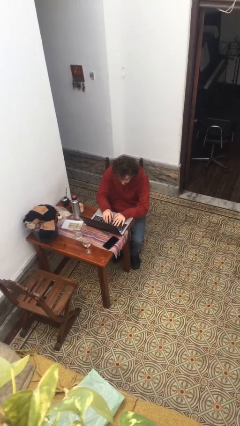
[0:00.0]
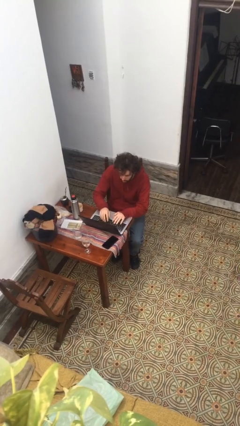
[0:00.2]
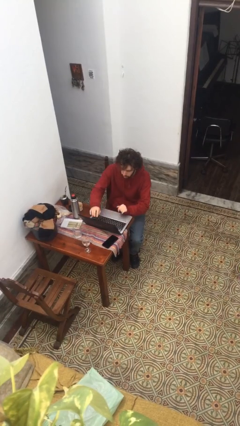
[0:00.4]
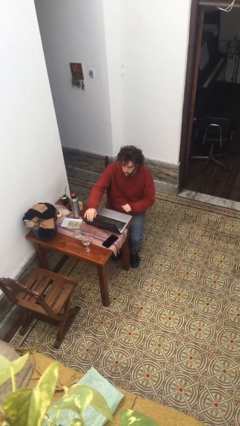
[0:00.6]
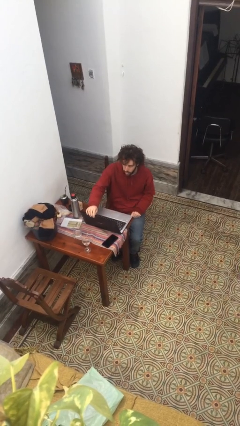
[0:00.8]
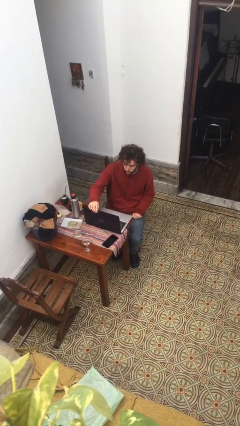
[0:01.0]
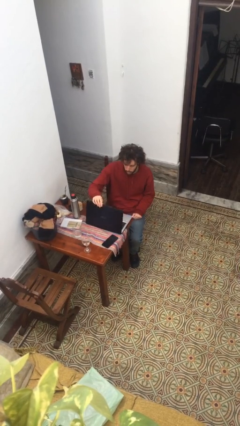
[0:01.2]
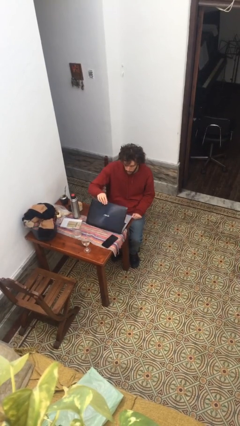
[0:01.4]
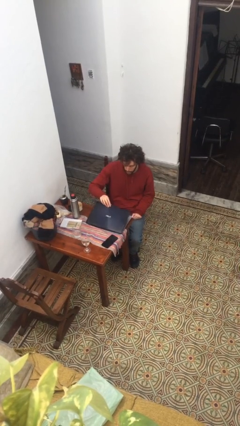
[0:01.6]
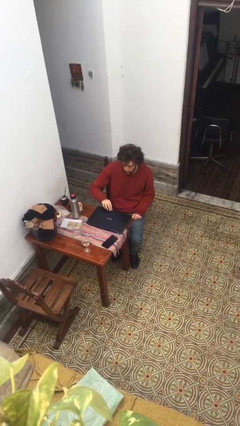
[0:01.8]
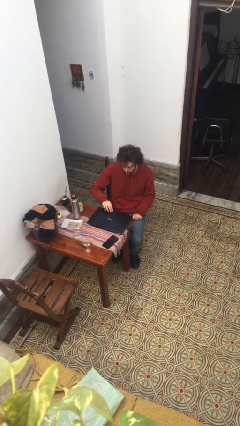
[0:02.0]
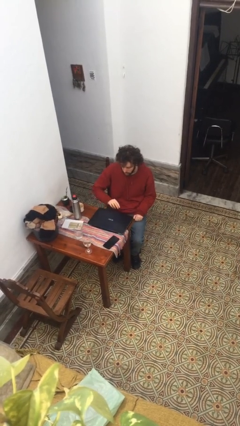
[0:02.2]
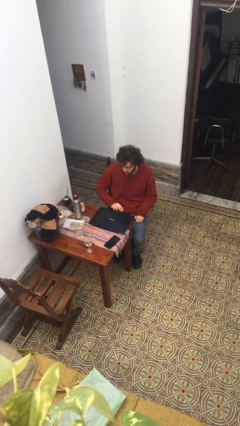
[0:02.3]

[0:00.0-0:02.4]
person closes laptop

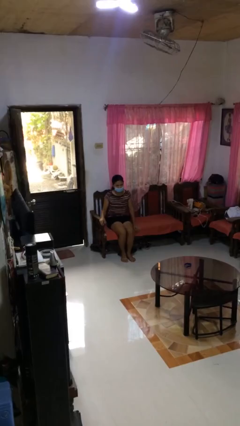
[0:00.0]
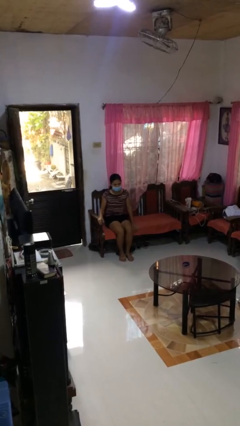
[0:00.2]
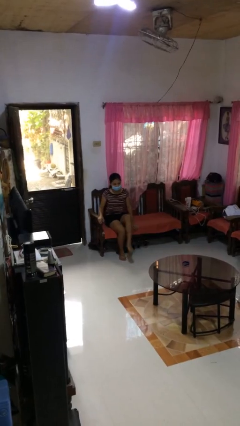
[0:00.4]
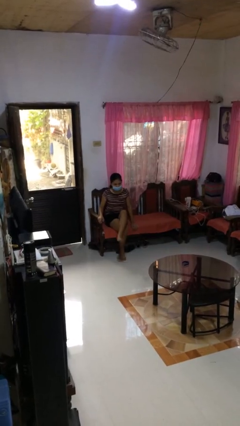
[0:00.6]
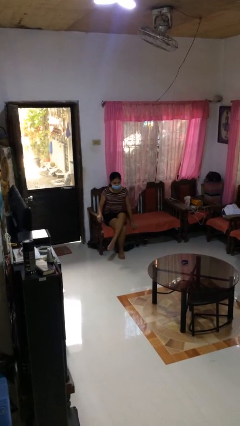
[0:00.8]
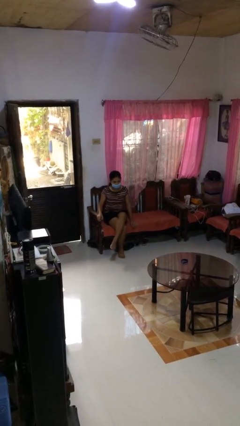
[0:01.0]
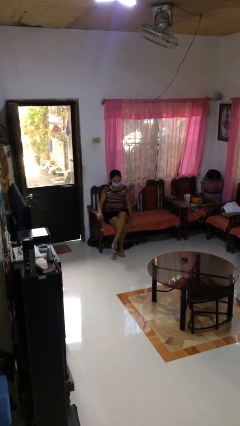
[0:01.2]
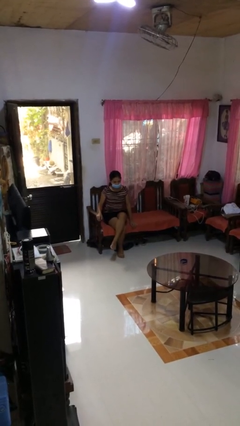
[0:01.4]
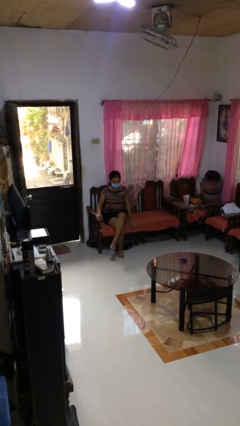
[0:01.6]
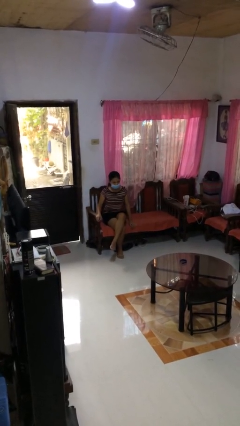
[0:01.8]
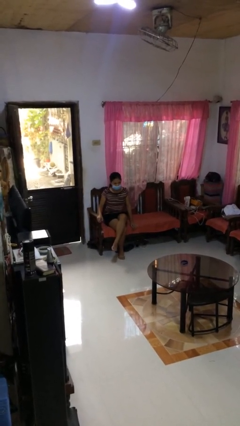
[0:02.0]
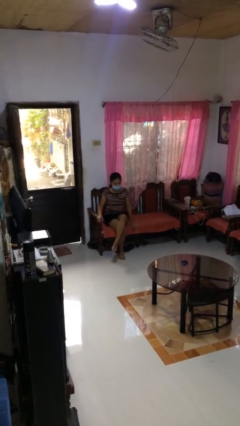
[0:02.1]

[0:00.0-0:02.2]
person crosses legs

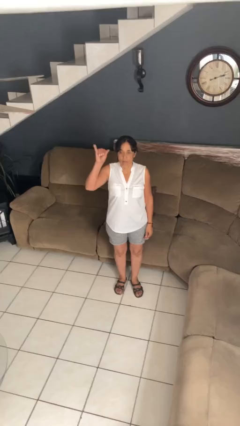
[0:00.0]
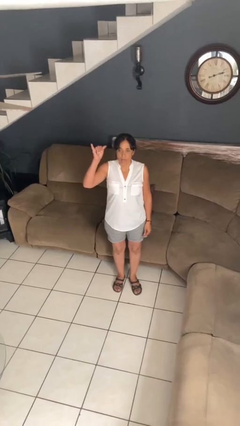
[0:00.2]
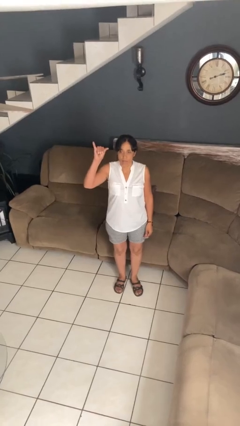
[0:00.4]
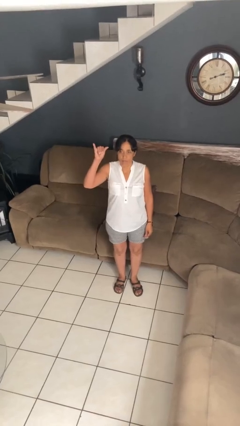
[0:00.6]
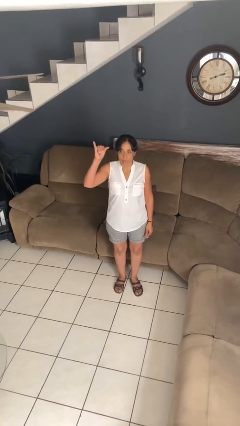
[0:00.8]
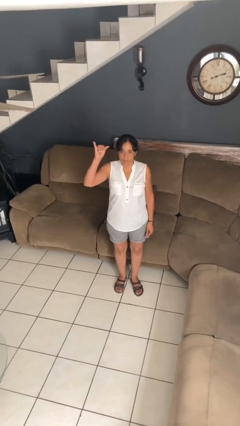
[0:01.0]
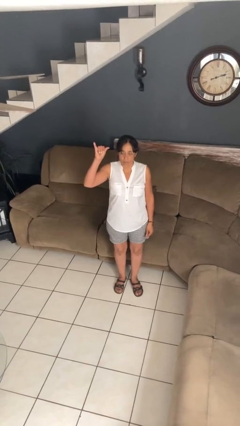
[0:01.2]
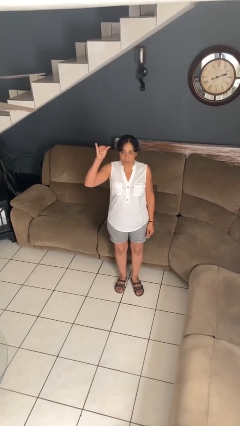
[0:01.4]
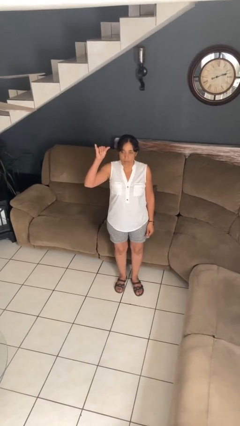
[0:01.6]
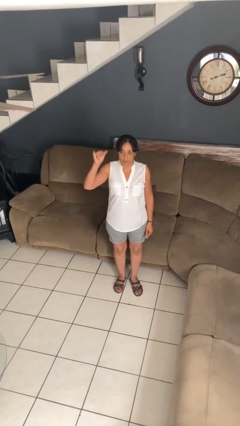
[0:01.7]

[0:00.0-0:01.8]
person gestures hang loose

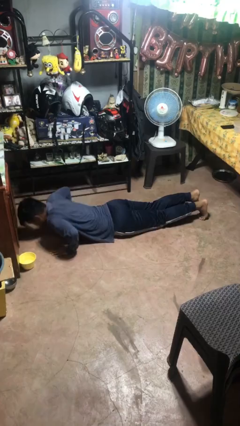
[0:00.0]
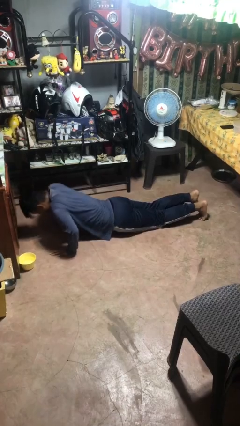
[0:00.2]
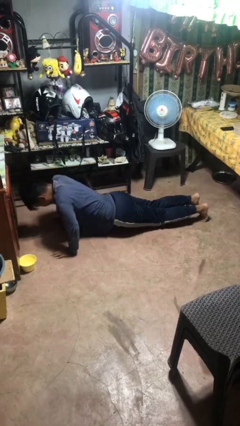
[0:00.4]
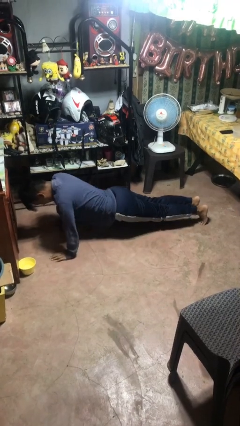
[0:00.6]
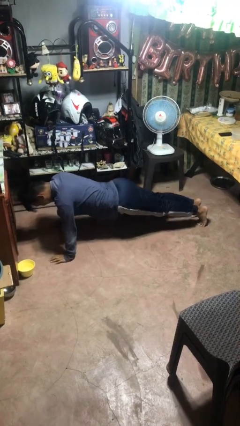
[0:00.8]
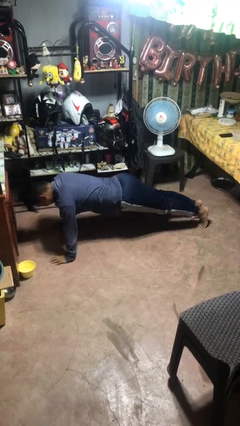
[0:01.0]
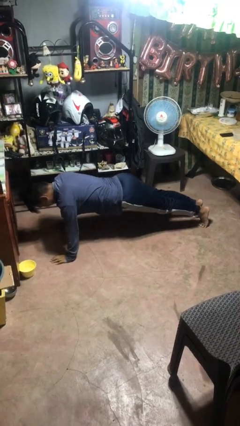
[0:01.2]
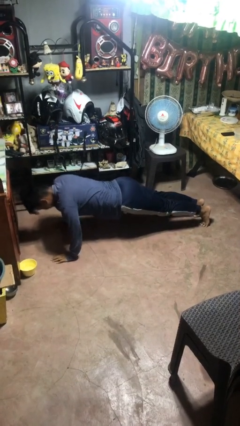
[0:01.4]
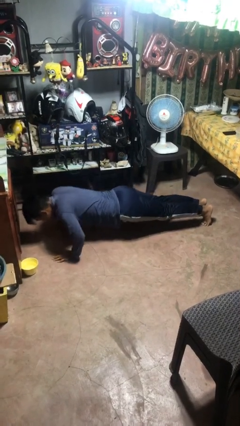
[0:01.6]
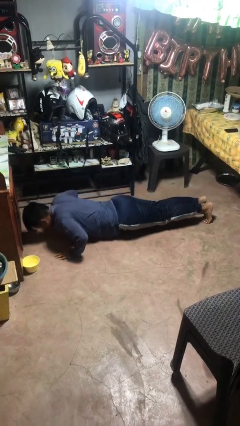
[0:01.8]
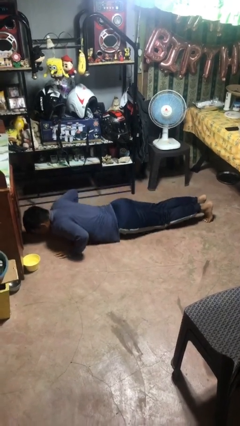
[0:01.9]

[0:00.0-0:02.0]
person exercises with pushup

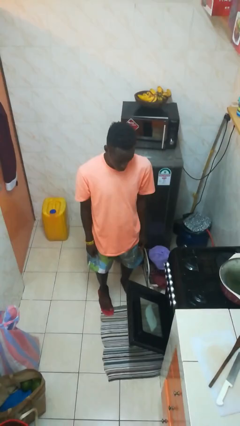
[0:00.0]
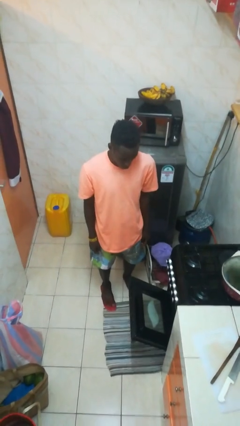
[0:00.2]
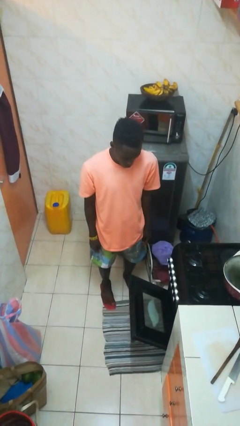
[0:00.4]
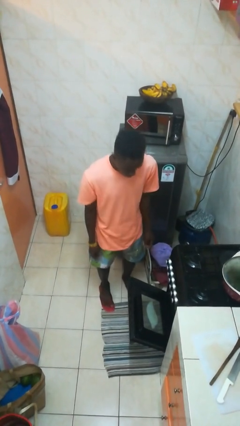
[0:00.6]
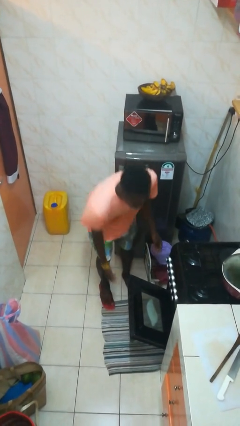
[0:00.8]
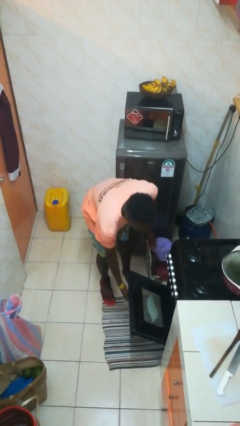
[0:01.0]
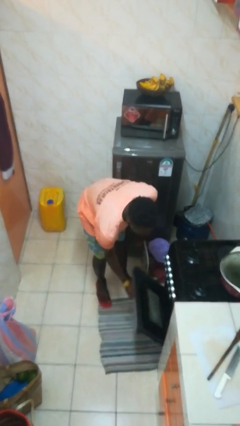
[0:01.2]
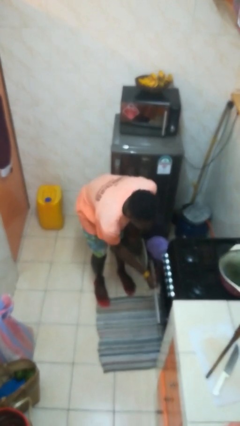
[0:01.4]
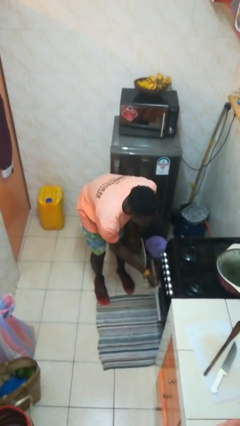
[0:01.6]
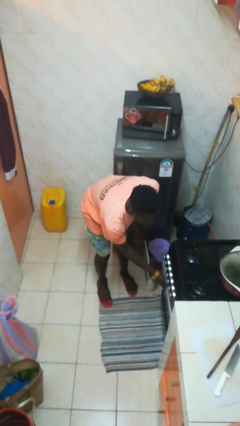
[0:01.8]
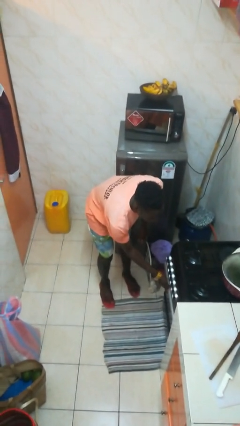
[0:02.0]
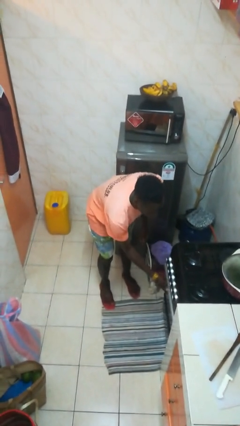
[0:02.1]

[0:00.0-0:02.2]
person closes oven door

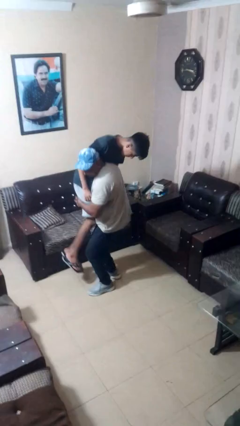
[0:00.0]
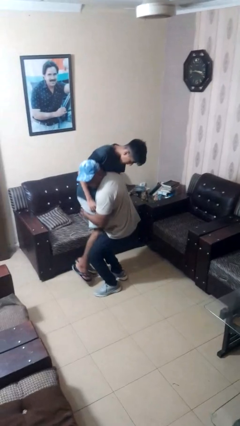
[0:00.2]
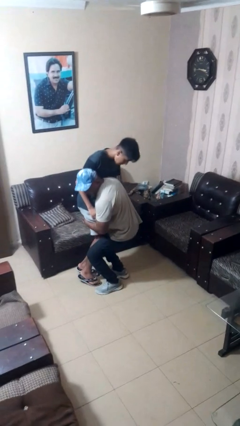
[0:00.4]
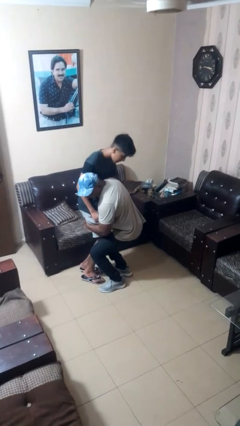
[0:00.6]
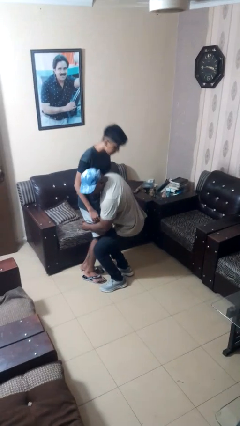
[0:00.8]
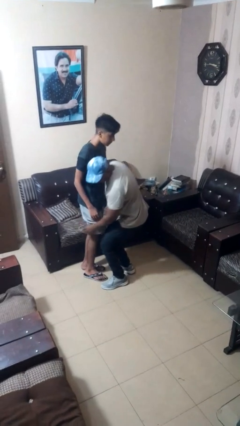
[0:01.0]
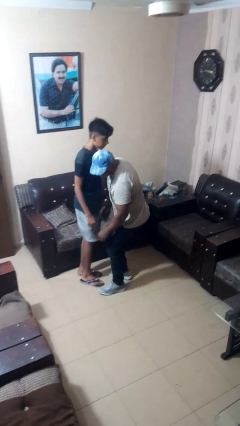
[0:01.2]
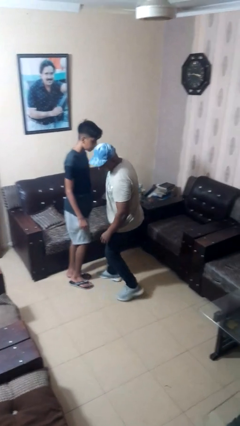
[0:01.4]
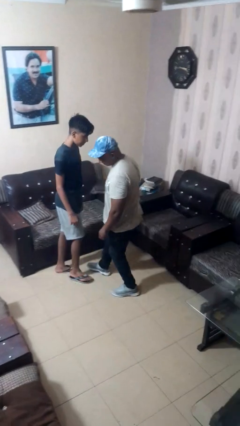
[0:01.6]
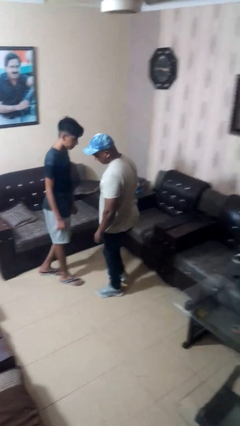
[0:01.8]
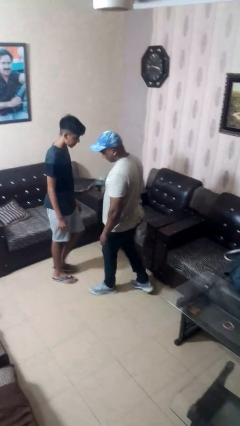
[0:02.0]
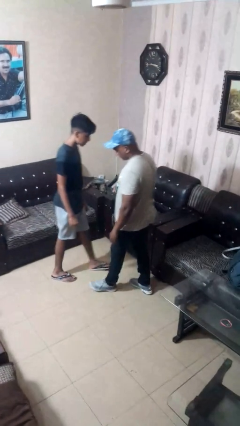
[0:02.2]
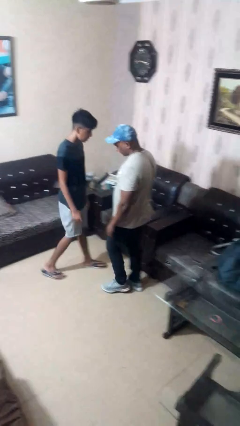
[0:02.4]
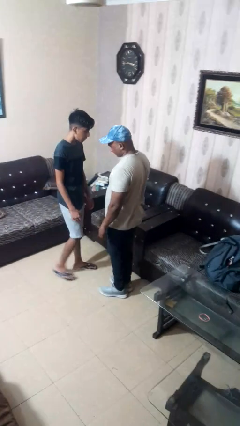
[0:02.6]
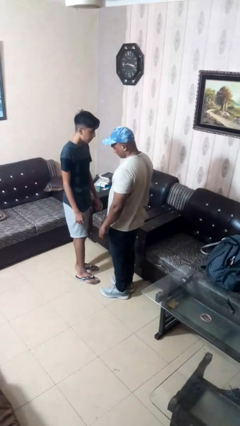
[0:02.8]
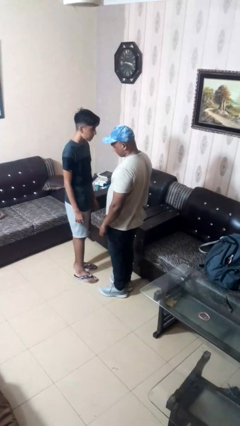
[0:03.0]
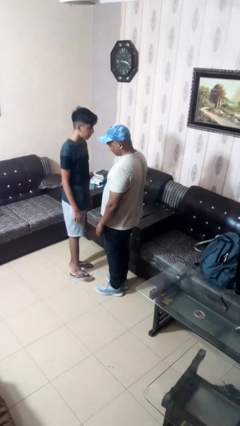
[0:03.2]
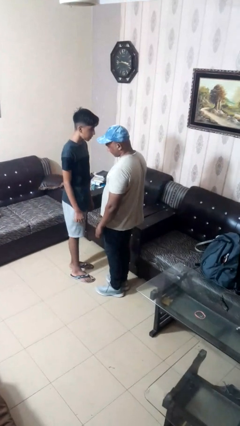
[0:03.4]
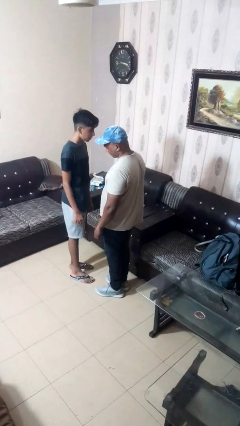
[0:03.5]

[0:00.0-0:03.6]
person puts down person

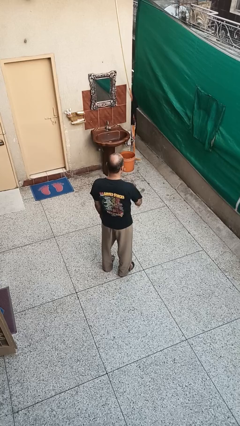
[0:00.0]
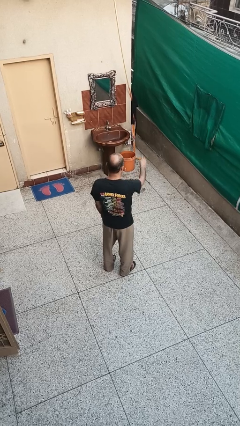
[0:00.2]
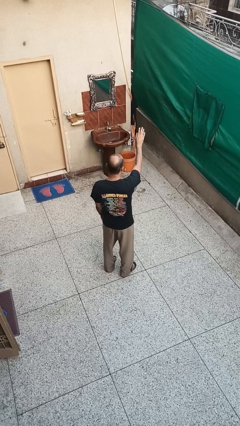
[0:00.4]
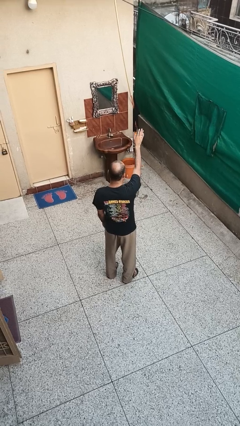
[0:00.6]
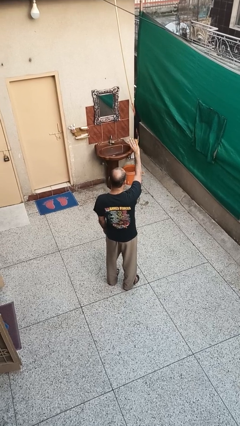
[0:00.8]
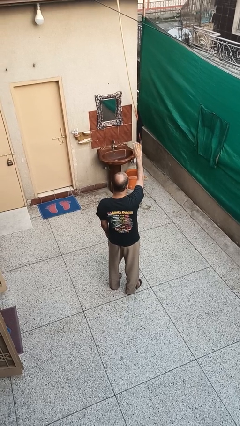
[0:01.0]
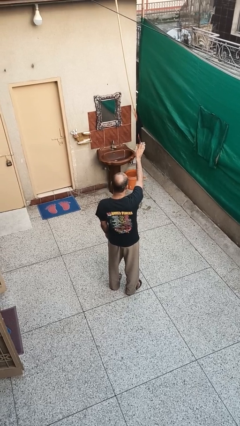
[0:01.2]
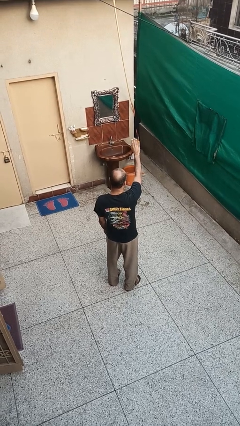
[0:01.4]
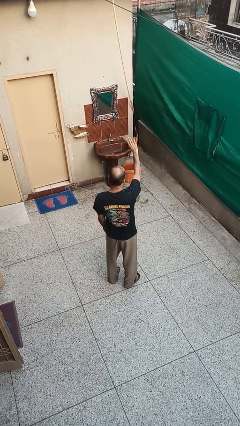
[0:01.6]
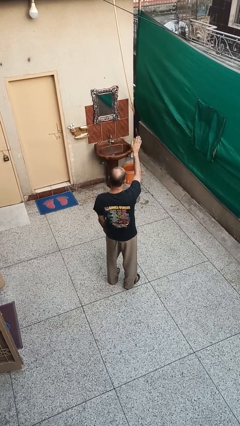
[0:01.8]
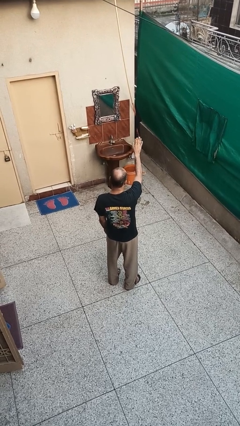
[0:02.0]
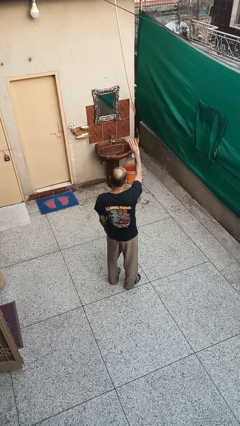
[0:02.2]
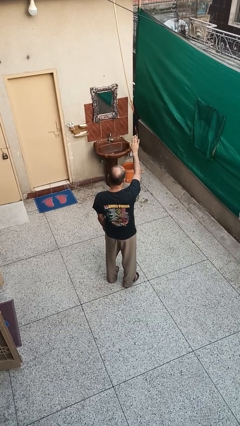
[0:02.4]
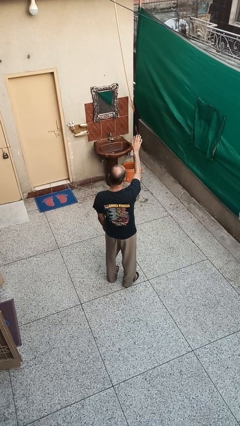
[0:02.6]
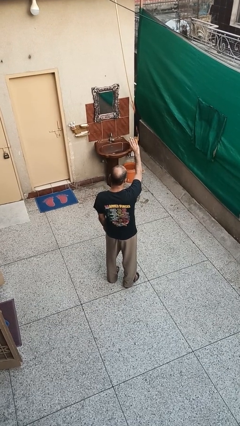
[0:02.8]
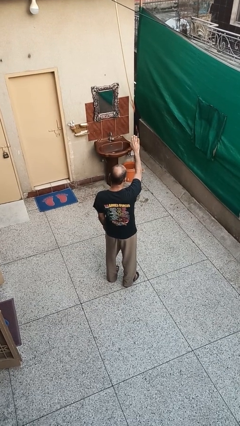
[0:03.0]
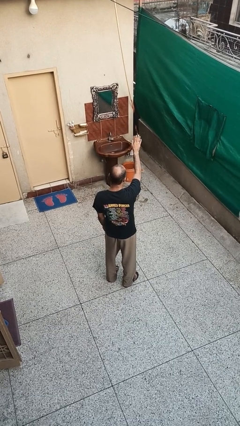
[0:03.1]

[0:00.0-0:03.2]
person waves at person
